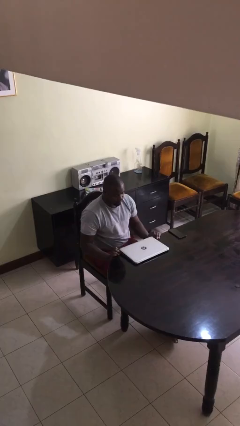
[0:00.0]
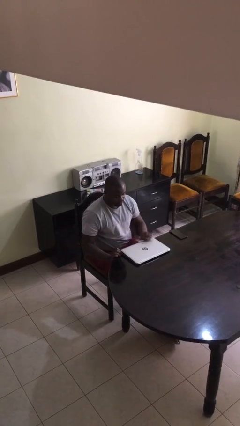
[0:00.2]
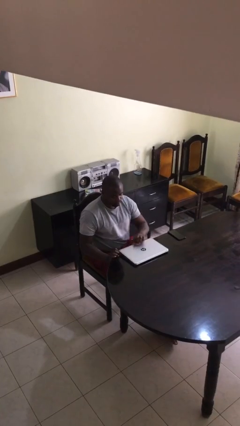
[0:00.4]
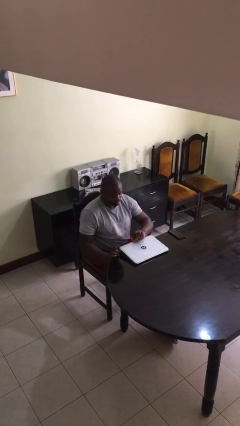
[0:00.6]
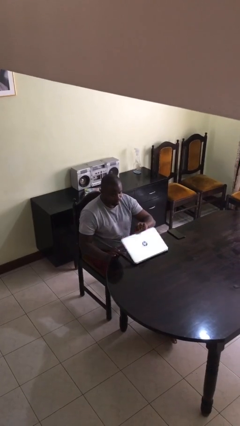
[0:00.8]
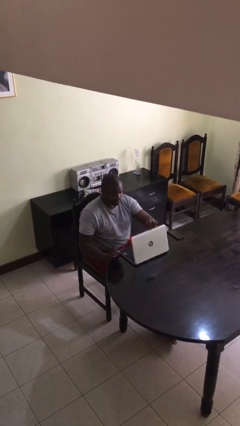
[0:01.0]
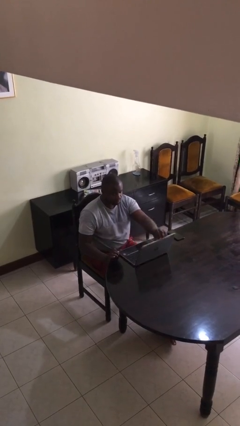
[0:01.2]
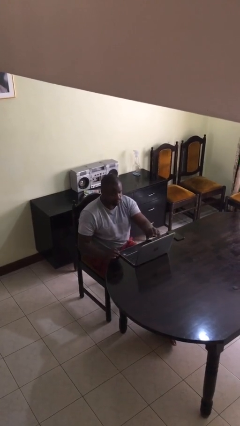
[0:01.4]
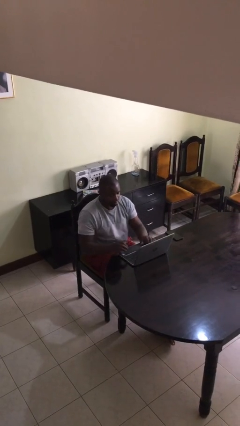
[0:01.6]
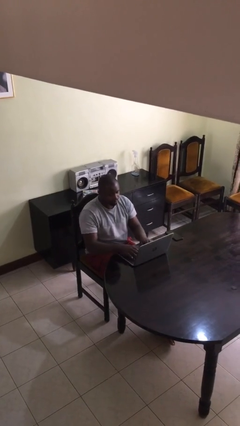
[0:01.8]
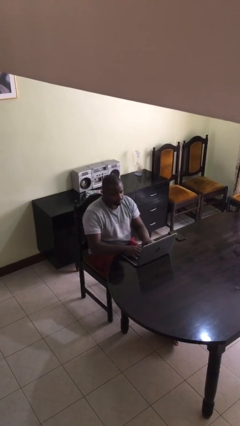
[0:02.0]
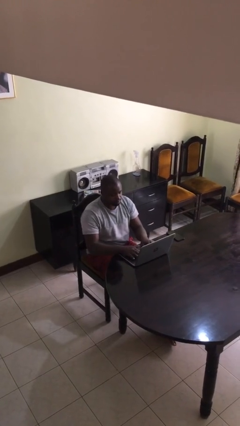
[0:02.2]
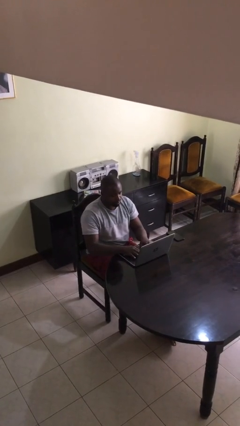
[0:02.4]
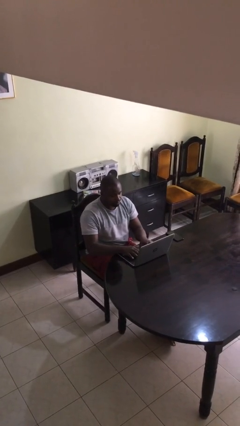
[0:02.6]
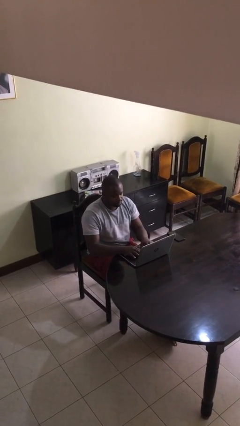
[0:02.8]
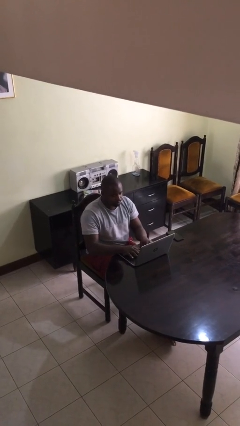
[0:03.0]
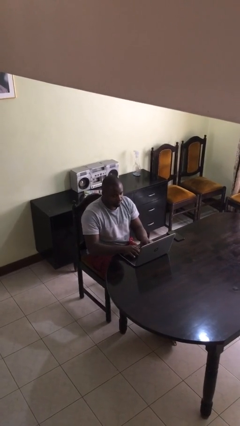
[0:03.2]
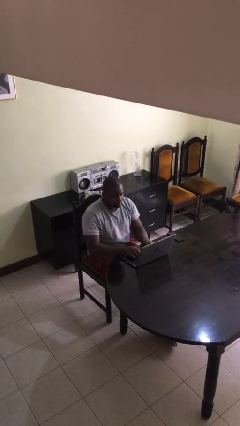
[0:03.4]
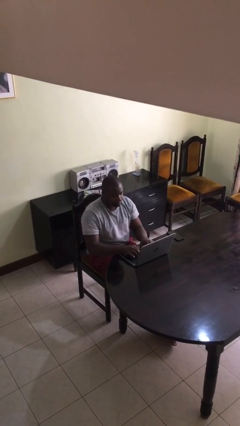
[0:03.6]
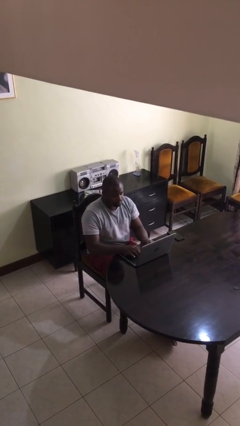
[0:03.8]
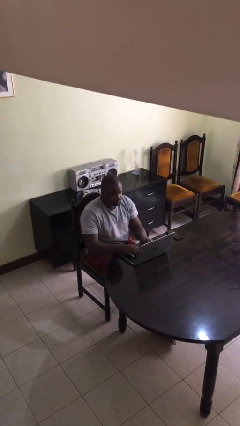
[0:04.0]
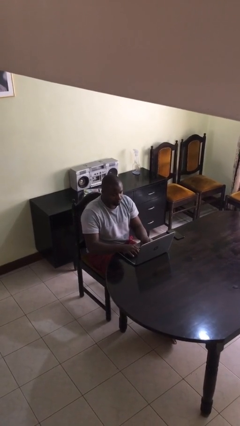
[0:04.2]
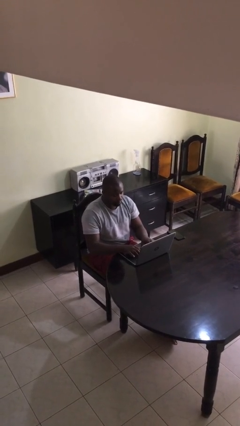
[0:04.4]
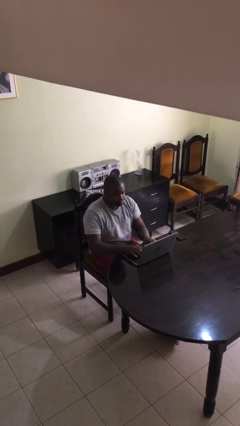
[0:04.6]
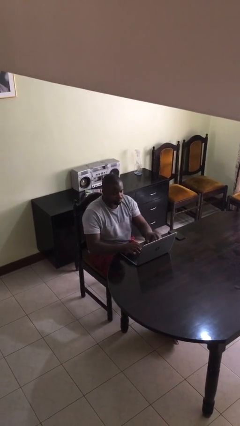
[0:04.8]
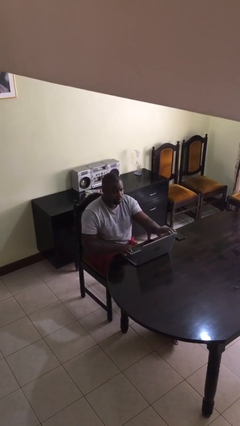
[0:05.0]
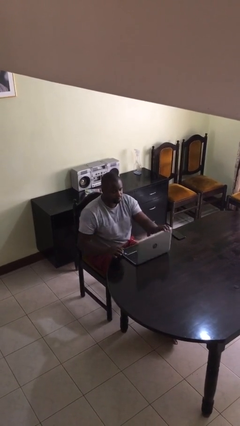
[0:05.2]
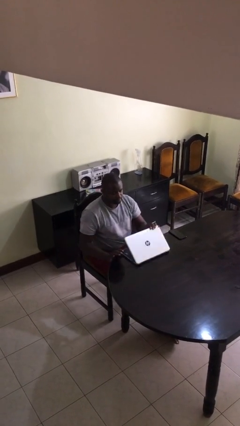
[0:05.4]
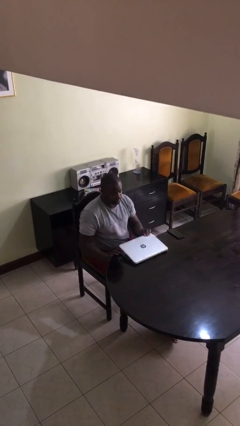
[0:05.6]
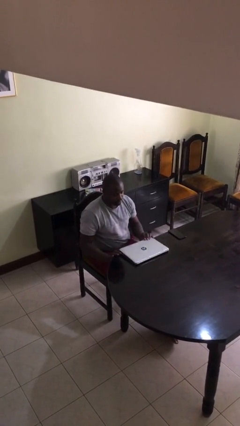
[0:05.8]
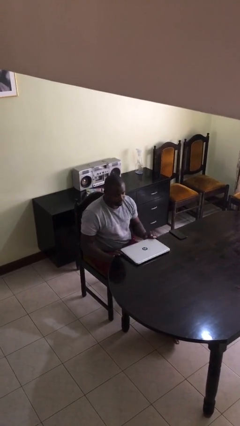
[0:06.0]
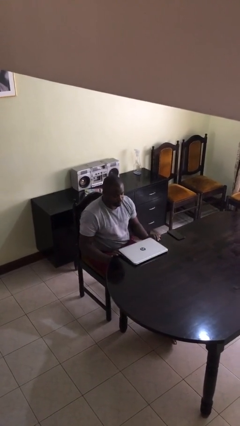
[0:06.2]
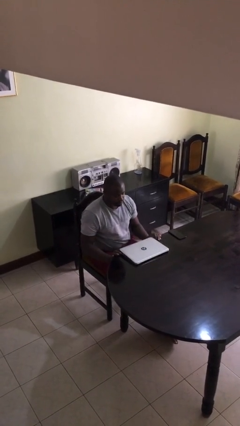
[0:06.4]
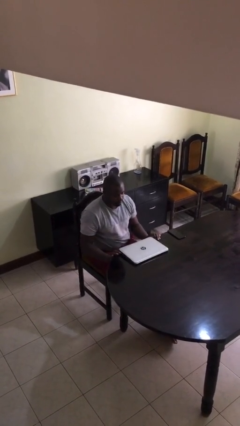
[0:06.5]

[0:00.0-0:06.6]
person interacts with laptop

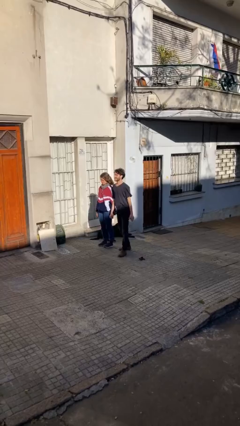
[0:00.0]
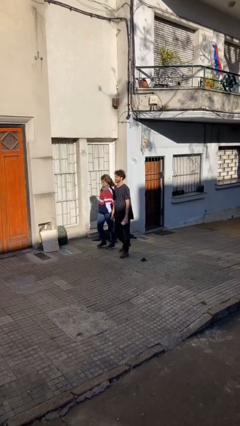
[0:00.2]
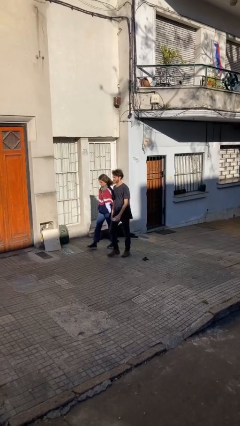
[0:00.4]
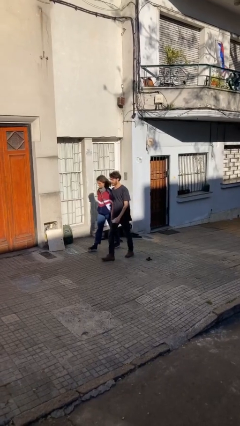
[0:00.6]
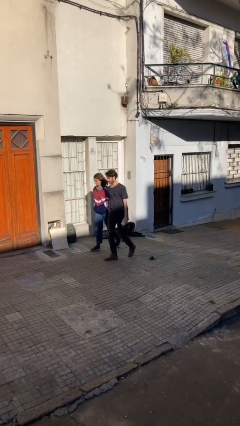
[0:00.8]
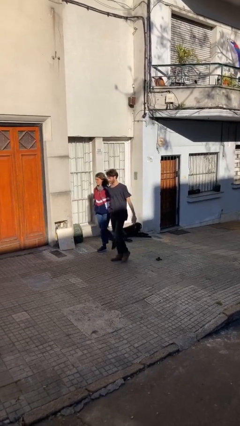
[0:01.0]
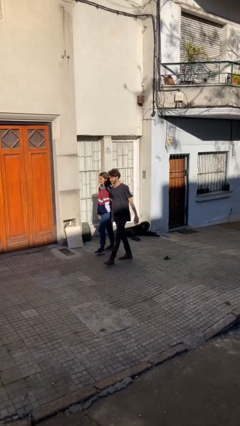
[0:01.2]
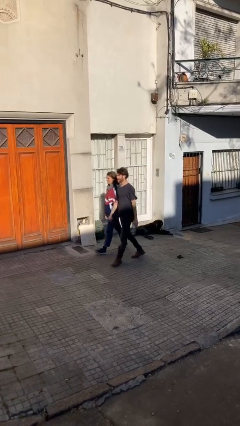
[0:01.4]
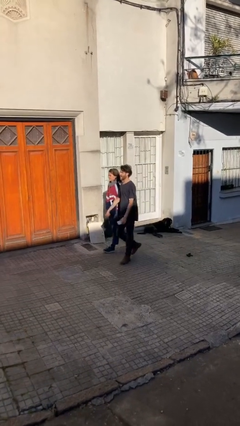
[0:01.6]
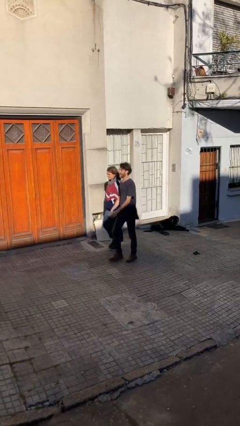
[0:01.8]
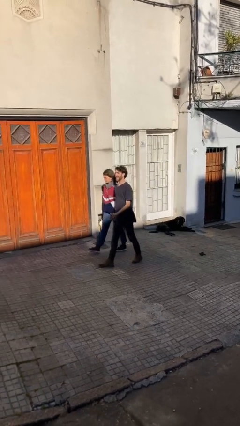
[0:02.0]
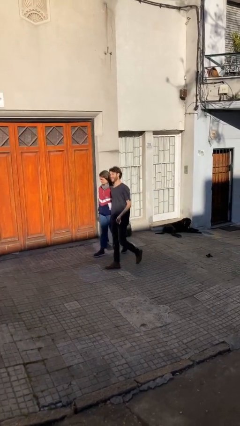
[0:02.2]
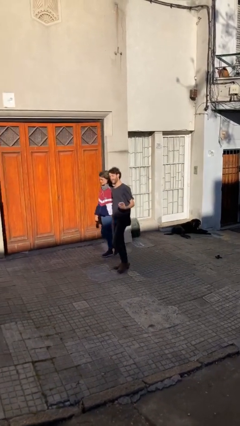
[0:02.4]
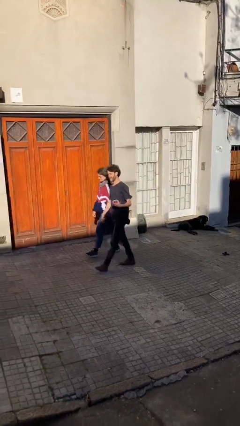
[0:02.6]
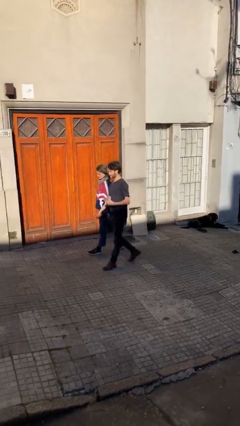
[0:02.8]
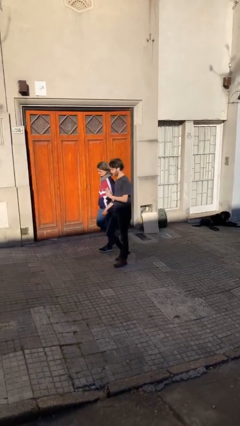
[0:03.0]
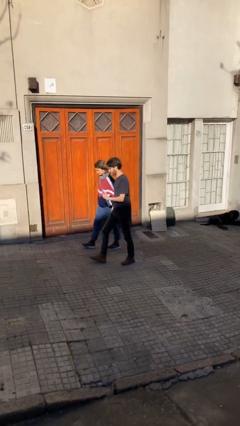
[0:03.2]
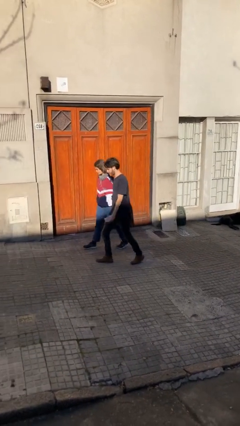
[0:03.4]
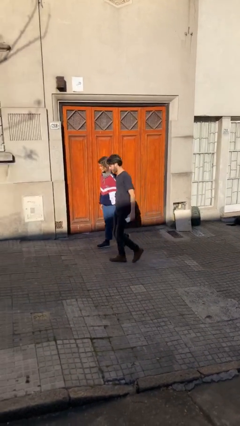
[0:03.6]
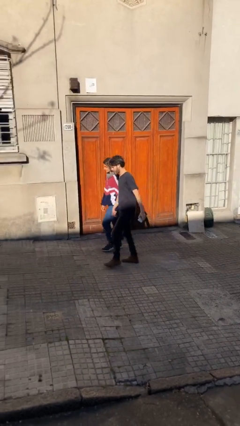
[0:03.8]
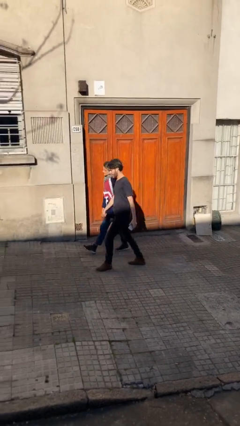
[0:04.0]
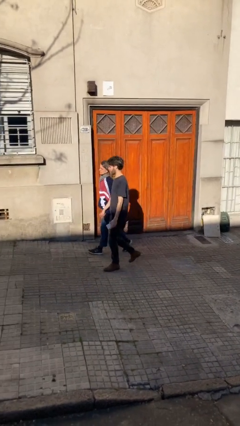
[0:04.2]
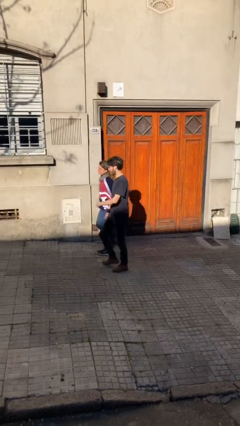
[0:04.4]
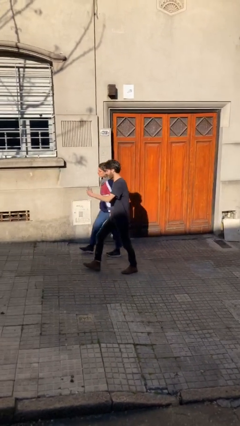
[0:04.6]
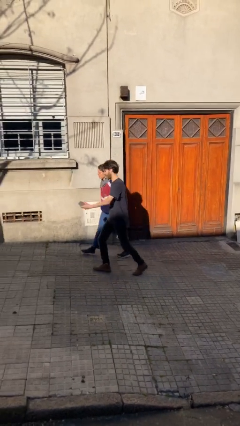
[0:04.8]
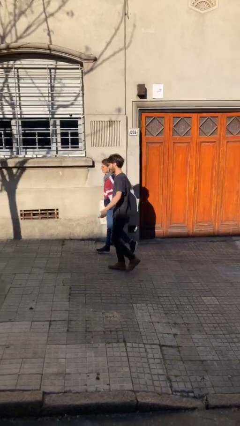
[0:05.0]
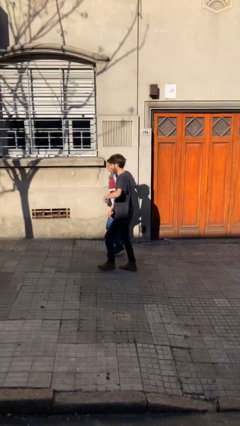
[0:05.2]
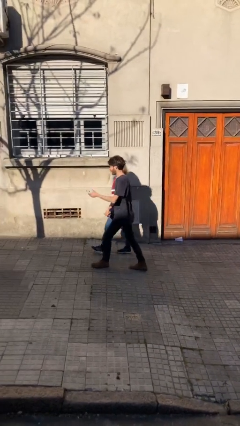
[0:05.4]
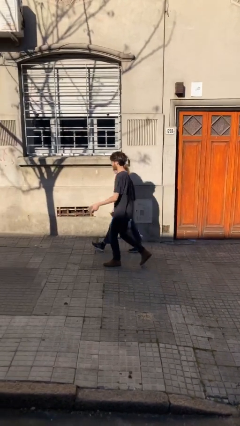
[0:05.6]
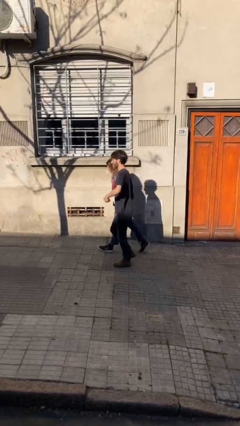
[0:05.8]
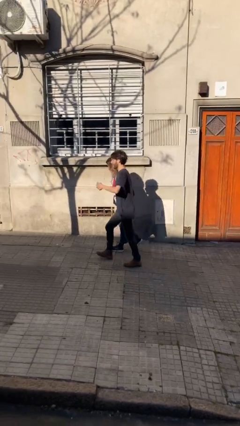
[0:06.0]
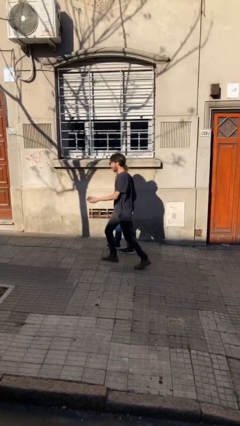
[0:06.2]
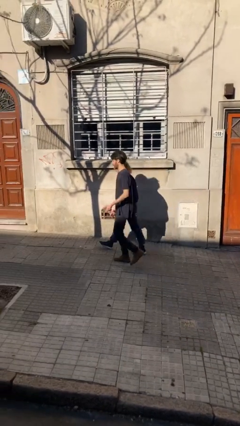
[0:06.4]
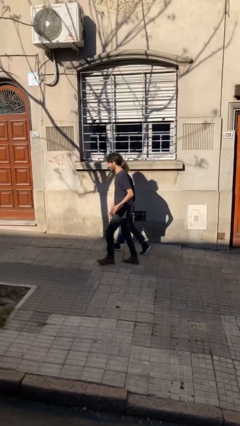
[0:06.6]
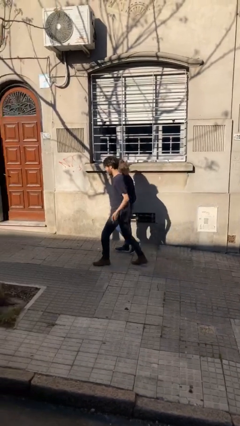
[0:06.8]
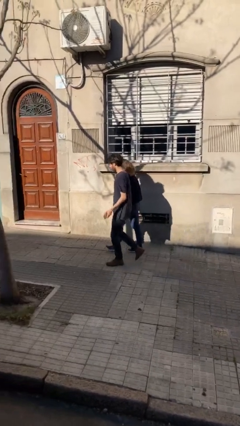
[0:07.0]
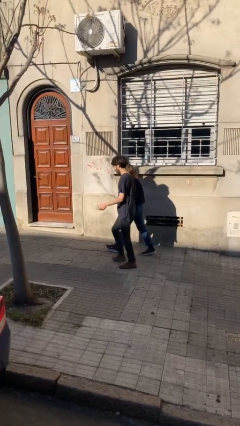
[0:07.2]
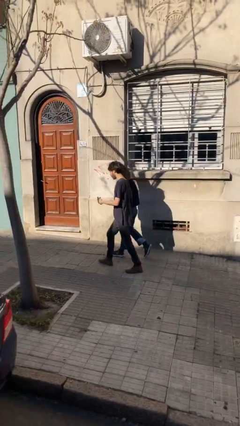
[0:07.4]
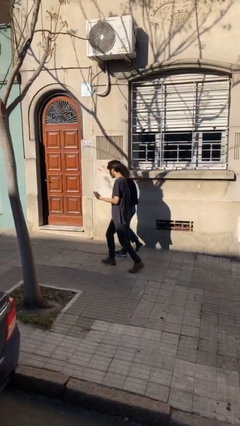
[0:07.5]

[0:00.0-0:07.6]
person holds hand

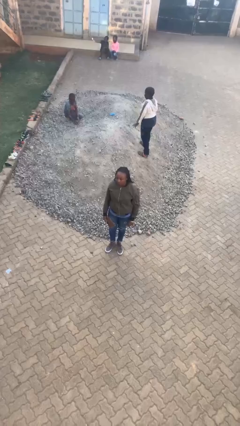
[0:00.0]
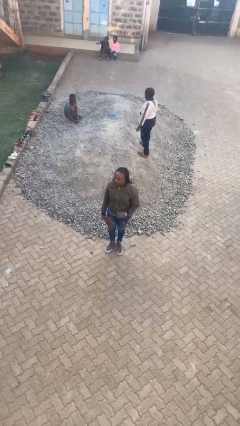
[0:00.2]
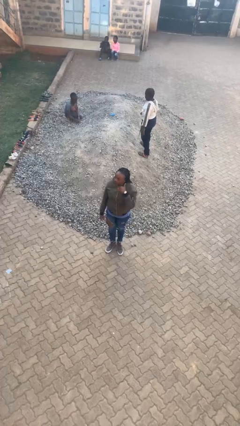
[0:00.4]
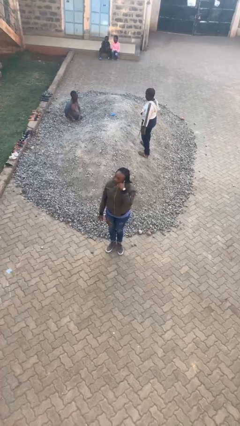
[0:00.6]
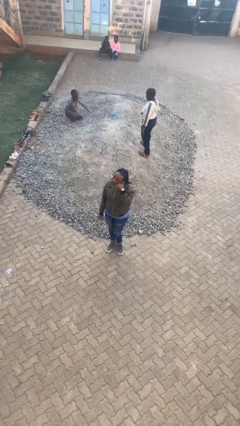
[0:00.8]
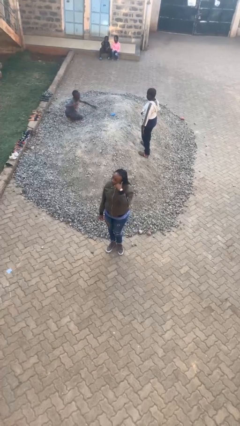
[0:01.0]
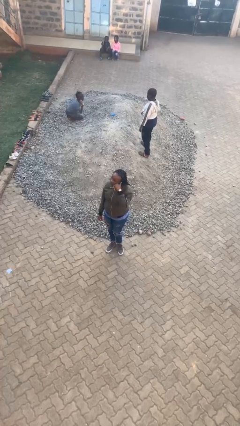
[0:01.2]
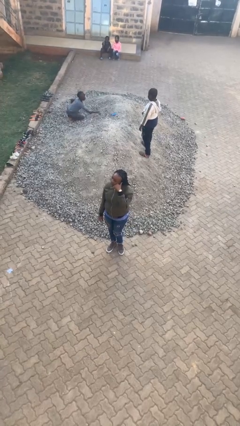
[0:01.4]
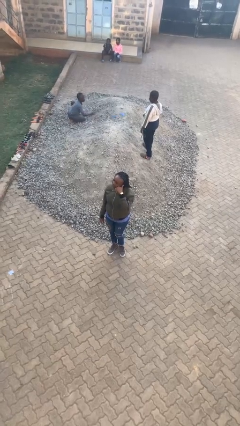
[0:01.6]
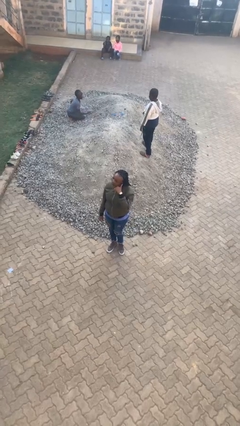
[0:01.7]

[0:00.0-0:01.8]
person gestures call me

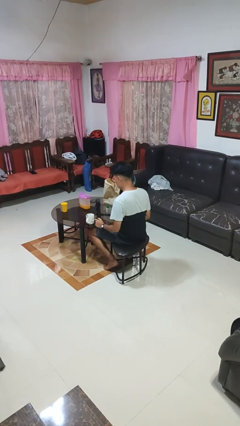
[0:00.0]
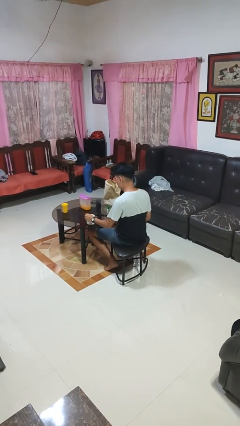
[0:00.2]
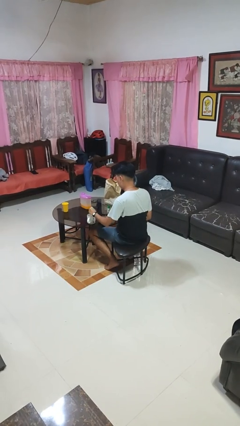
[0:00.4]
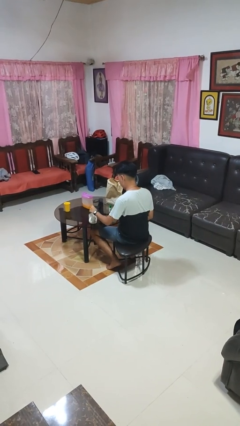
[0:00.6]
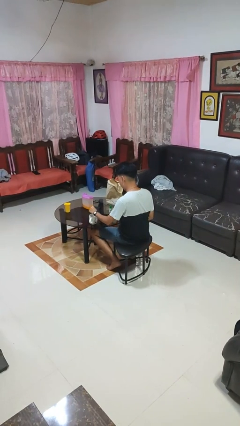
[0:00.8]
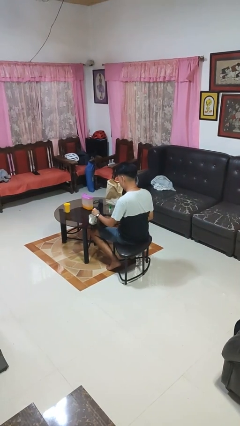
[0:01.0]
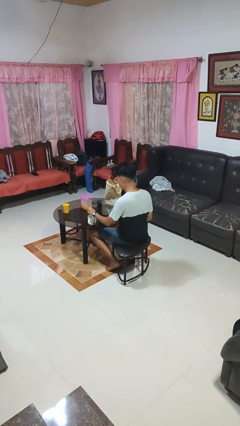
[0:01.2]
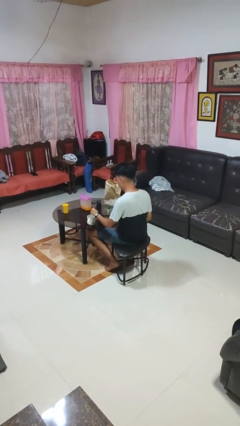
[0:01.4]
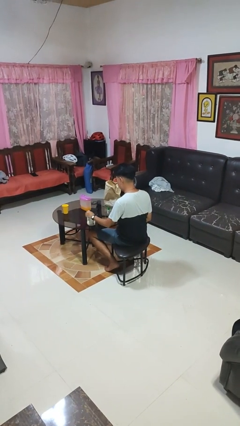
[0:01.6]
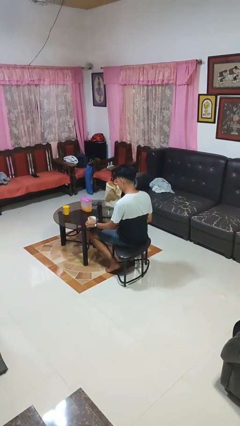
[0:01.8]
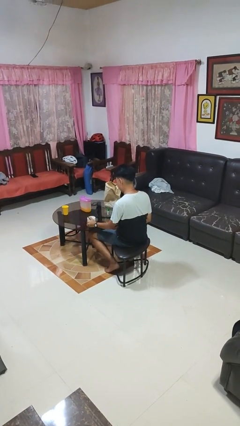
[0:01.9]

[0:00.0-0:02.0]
person stirs mug
